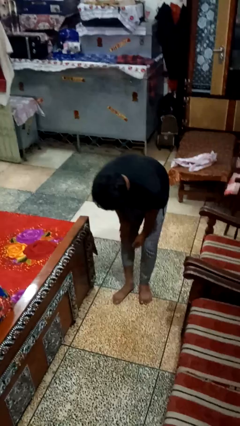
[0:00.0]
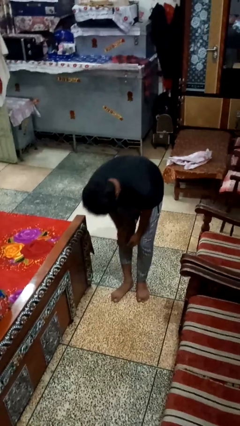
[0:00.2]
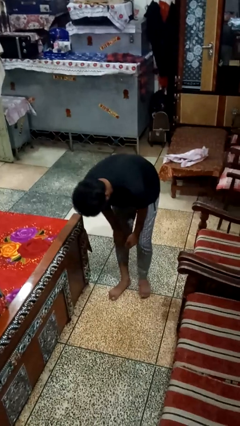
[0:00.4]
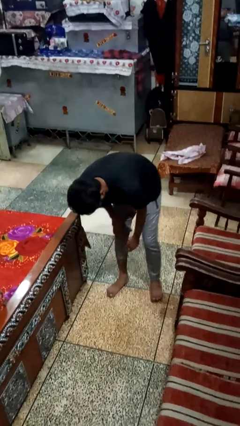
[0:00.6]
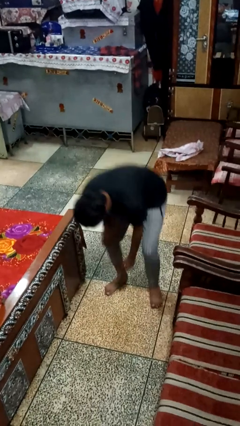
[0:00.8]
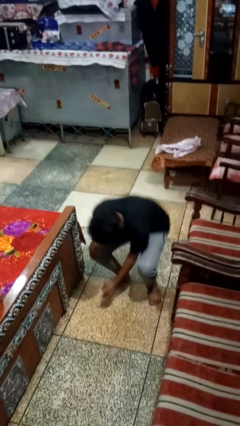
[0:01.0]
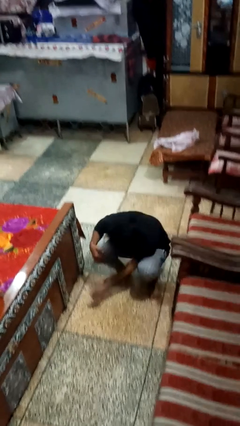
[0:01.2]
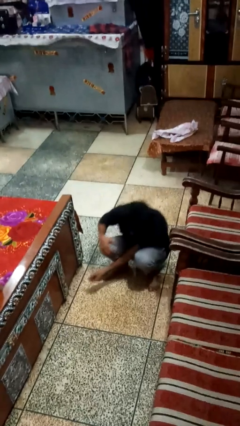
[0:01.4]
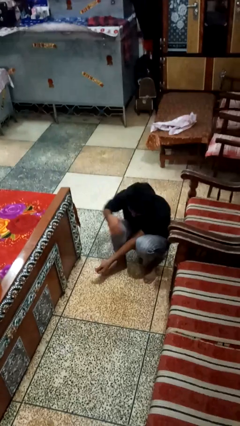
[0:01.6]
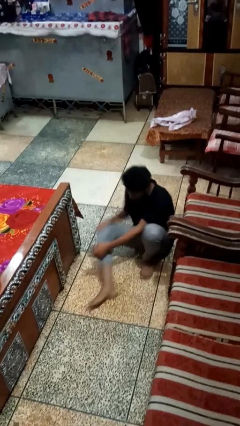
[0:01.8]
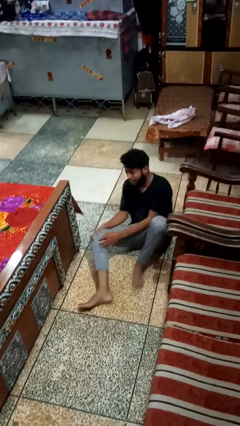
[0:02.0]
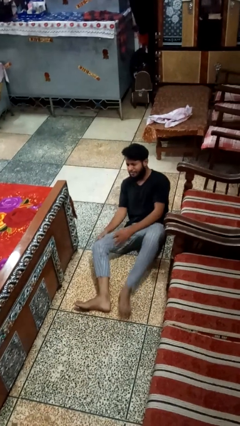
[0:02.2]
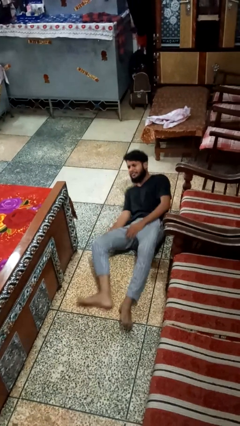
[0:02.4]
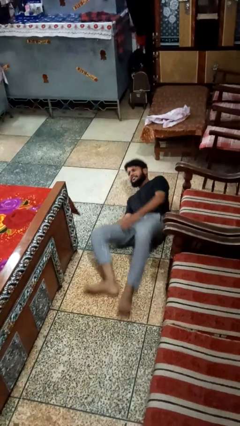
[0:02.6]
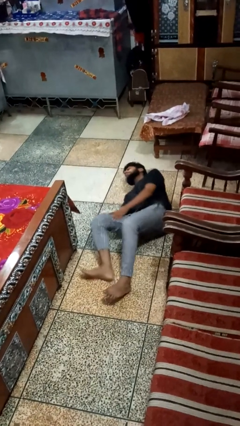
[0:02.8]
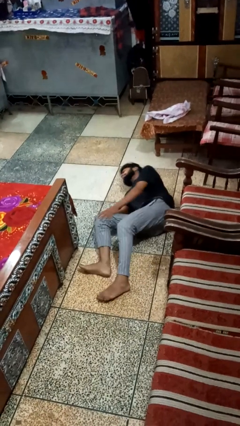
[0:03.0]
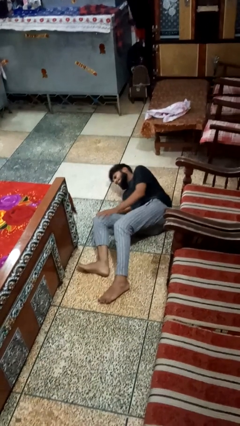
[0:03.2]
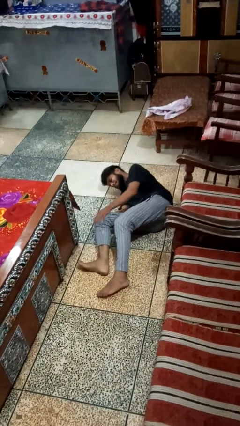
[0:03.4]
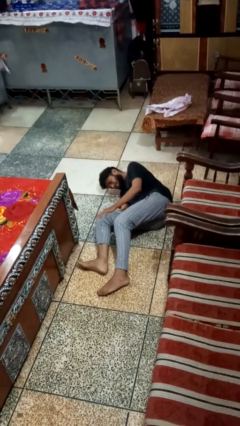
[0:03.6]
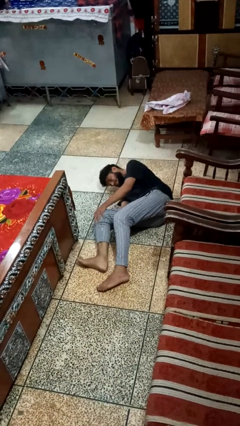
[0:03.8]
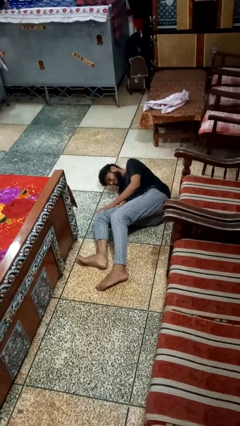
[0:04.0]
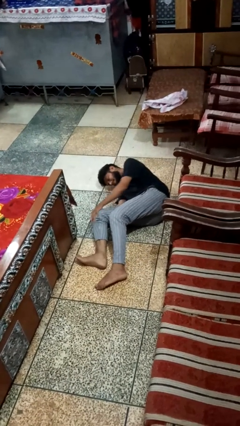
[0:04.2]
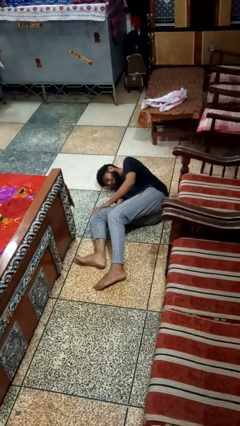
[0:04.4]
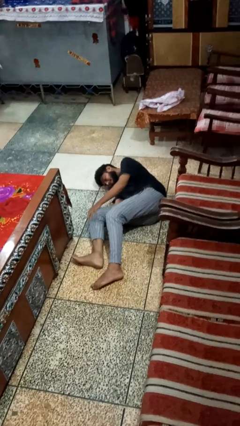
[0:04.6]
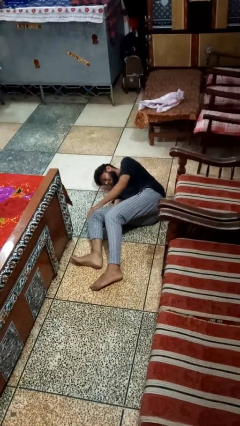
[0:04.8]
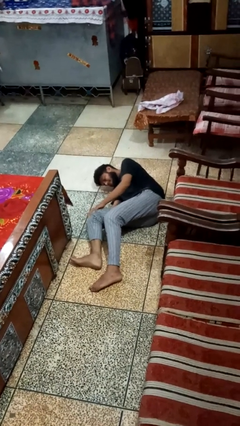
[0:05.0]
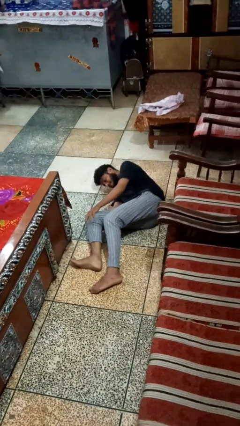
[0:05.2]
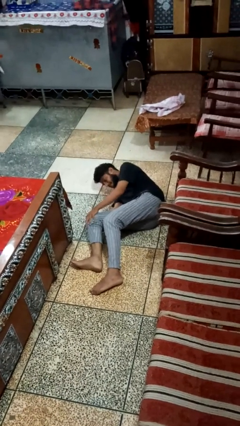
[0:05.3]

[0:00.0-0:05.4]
person lies down on floor

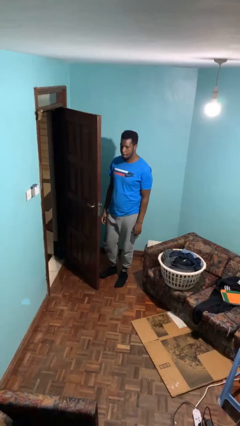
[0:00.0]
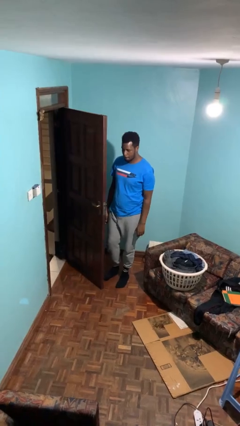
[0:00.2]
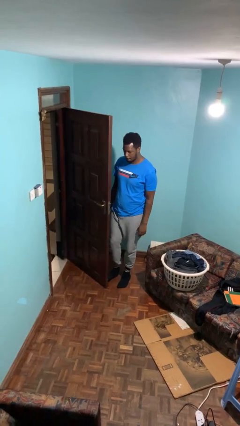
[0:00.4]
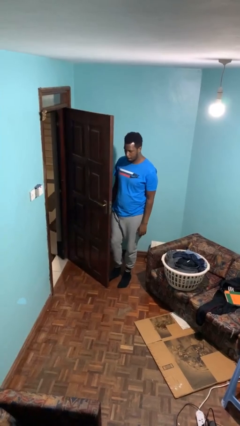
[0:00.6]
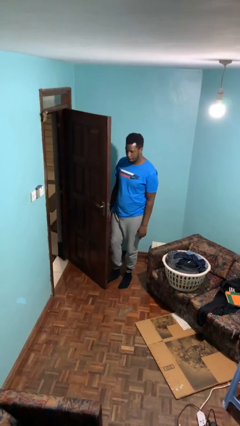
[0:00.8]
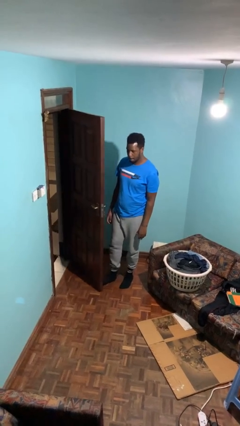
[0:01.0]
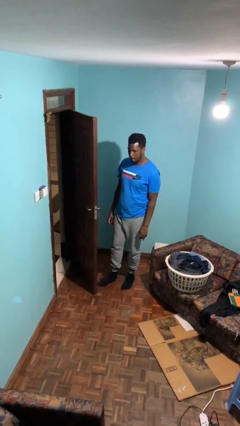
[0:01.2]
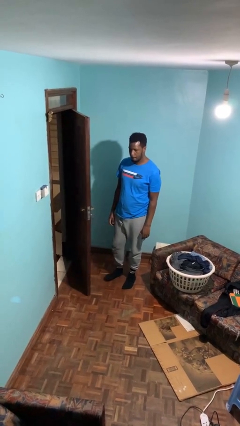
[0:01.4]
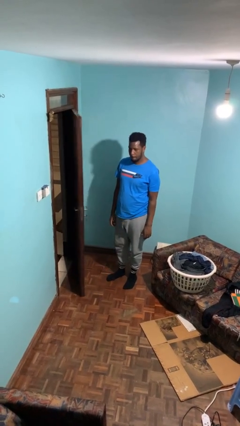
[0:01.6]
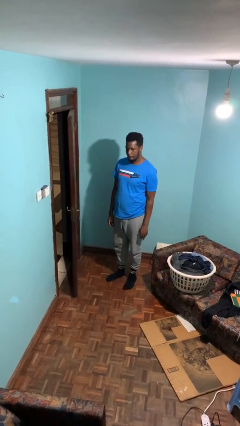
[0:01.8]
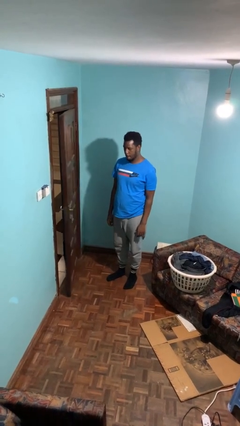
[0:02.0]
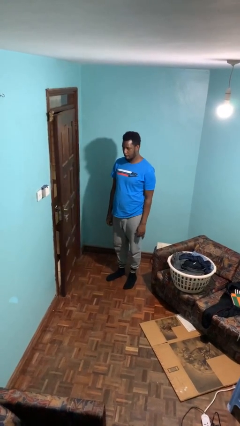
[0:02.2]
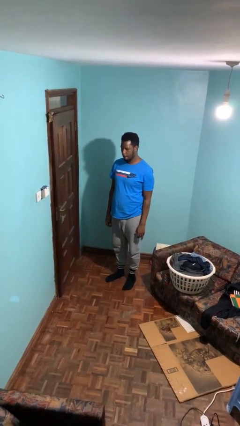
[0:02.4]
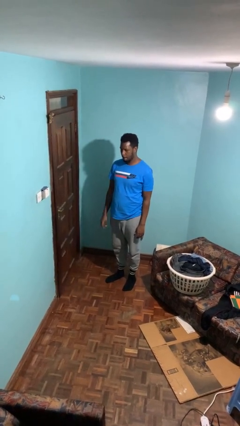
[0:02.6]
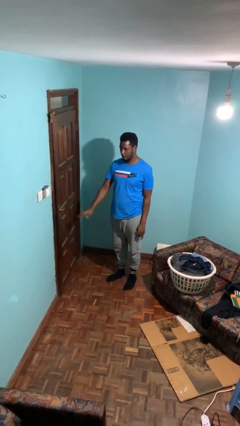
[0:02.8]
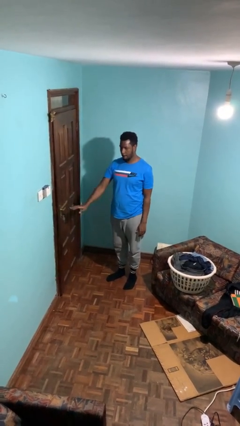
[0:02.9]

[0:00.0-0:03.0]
person closes door with foot

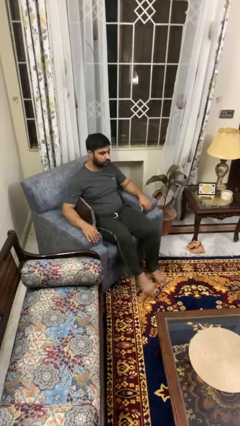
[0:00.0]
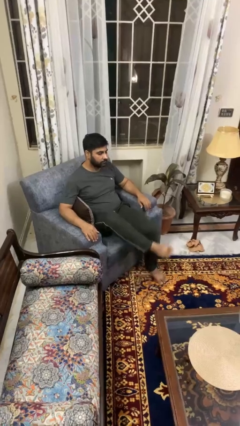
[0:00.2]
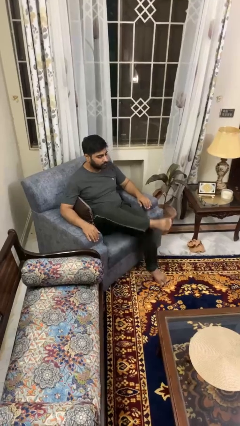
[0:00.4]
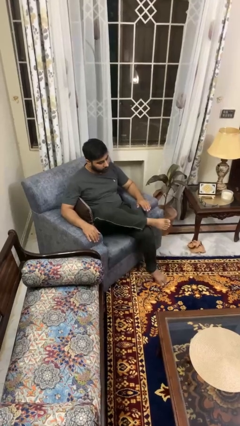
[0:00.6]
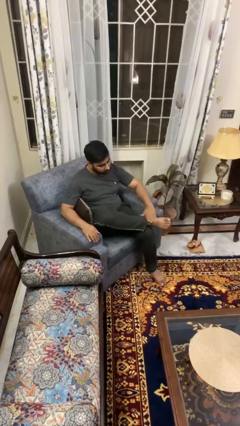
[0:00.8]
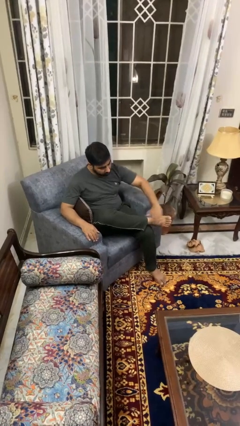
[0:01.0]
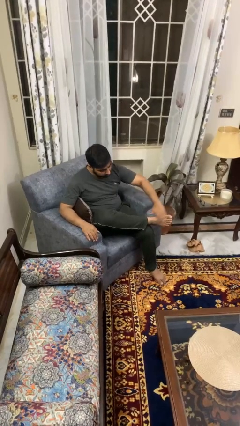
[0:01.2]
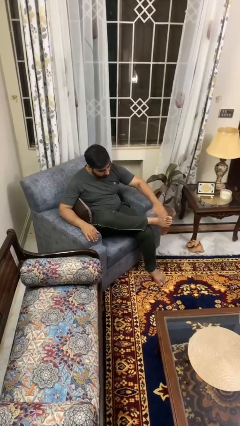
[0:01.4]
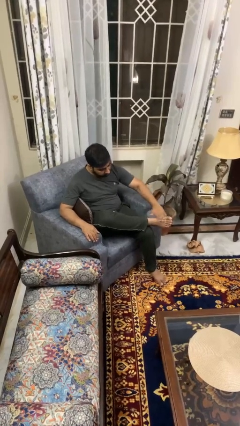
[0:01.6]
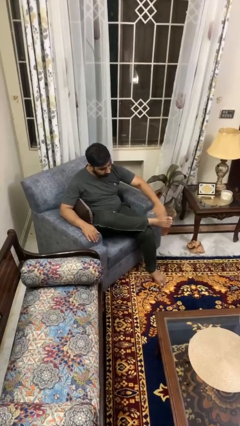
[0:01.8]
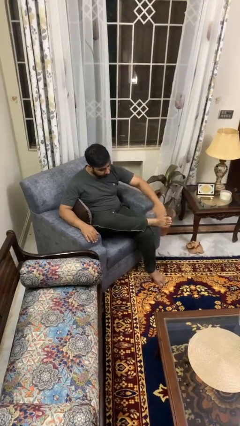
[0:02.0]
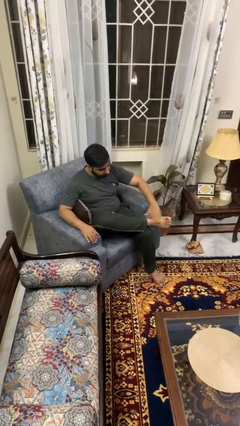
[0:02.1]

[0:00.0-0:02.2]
person rubs foot

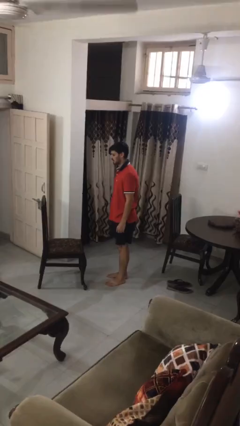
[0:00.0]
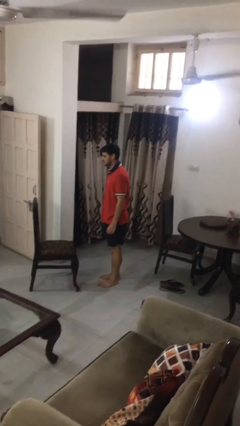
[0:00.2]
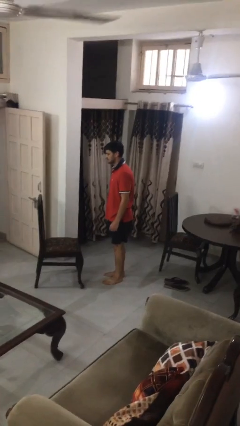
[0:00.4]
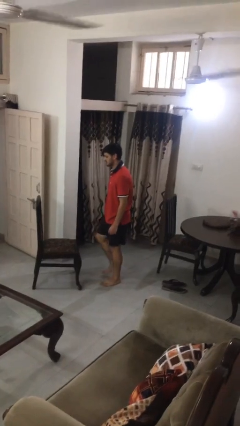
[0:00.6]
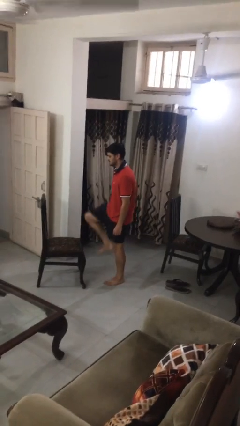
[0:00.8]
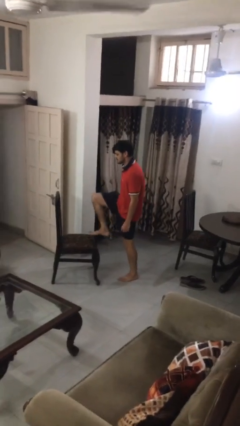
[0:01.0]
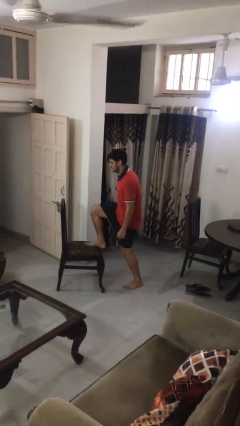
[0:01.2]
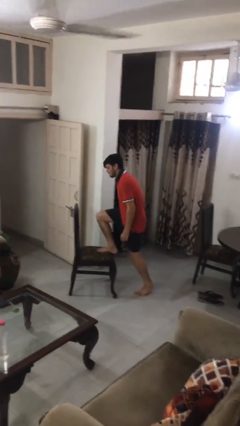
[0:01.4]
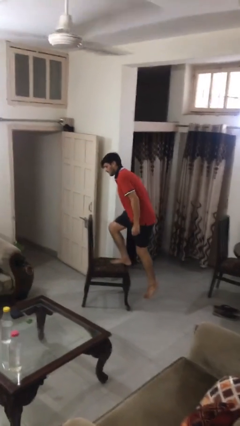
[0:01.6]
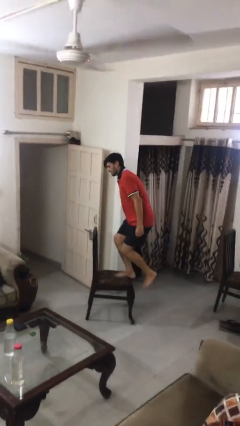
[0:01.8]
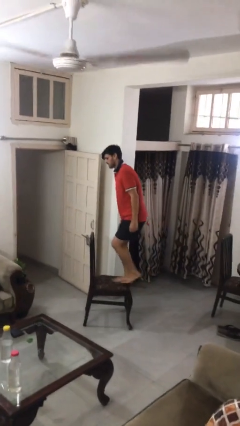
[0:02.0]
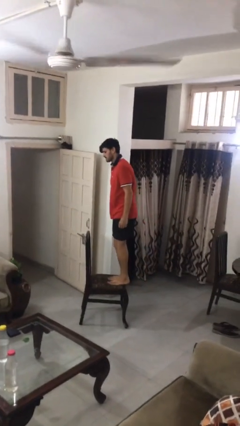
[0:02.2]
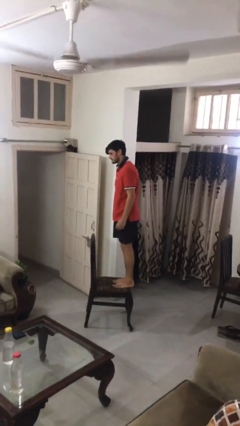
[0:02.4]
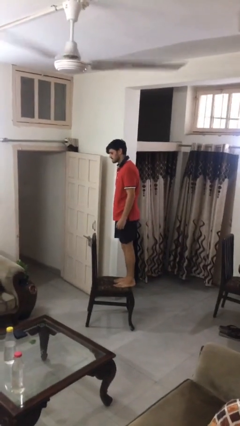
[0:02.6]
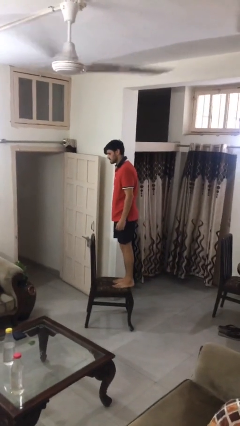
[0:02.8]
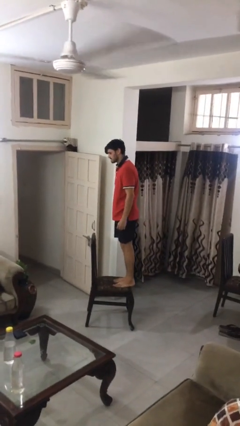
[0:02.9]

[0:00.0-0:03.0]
person climbs on chair

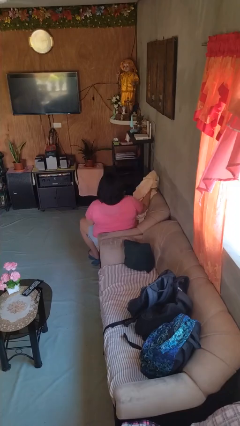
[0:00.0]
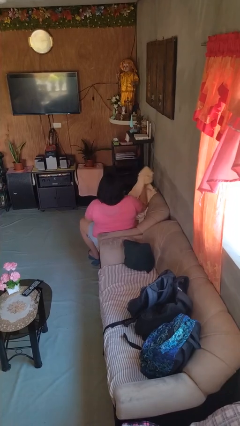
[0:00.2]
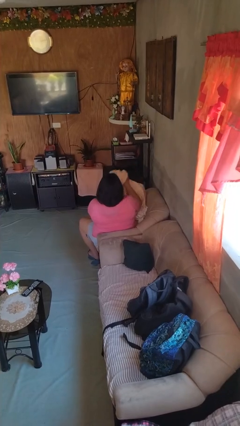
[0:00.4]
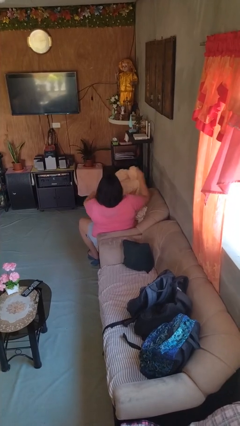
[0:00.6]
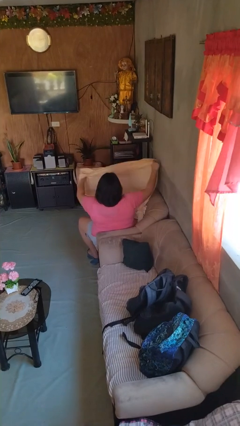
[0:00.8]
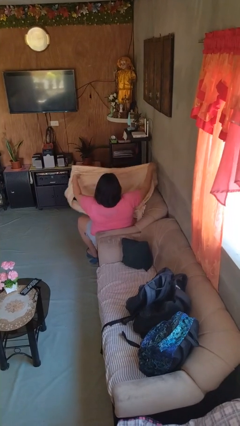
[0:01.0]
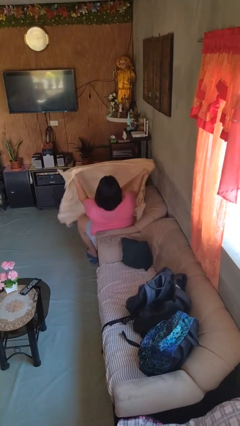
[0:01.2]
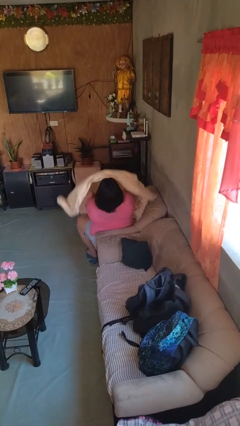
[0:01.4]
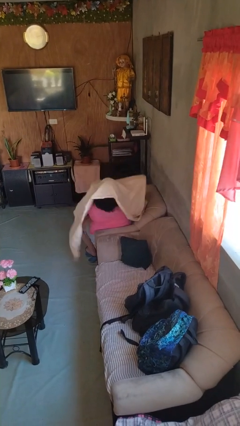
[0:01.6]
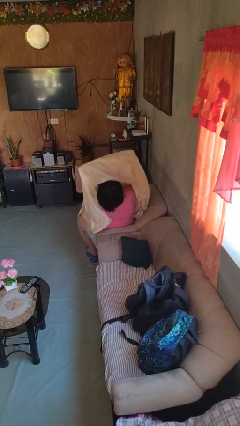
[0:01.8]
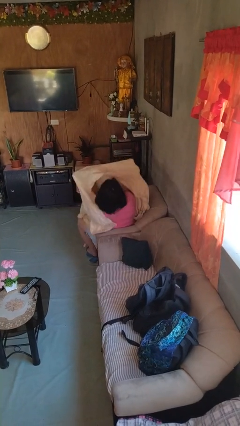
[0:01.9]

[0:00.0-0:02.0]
person covers with blanket

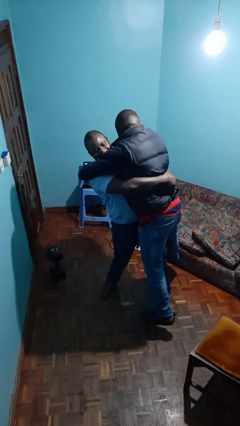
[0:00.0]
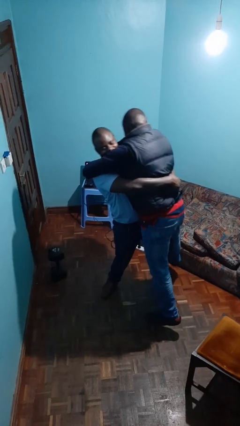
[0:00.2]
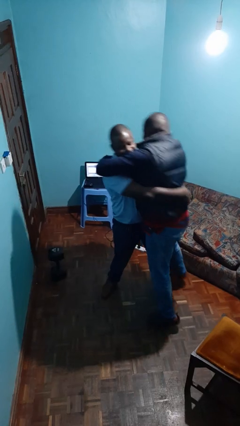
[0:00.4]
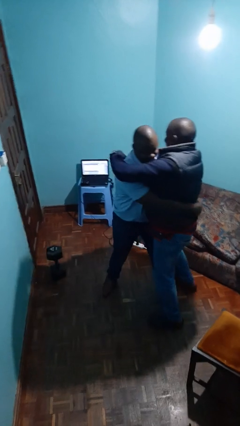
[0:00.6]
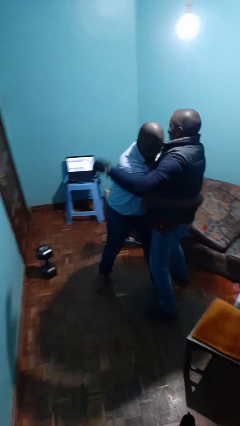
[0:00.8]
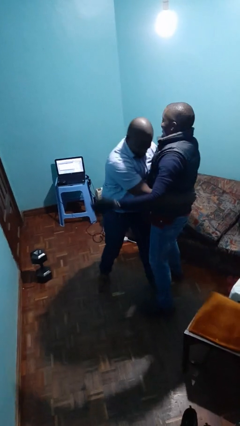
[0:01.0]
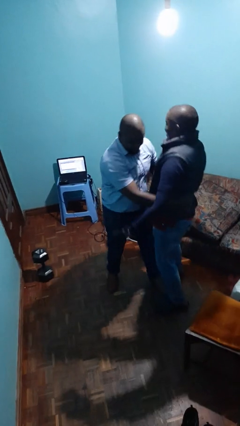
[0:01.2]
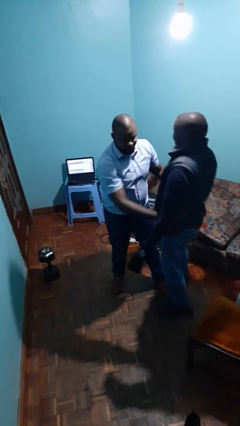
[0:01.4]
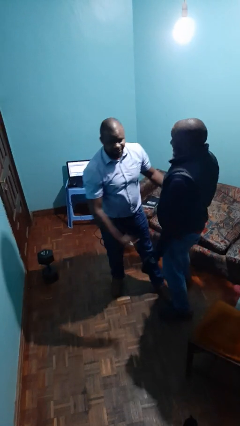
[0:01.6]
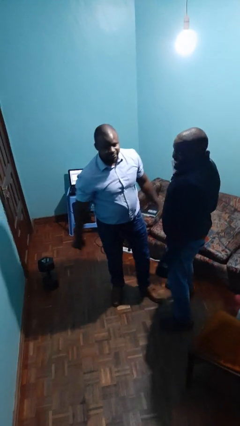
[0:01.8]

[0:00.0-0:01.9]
person puts down person

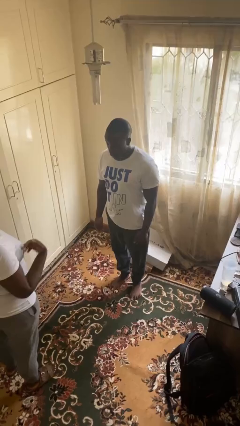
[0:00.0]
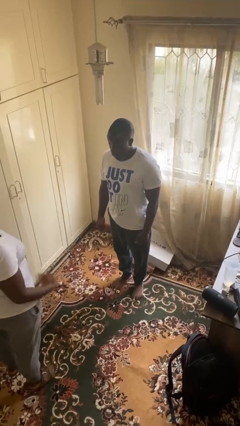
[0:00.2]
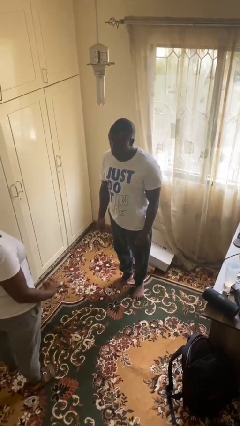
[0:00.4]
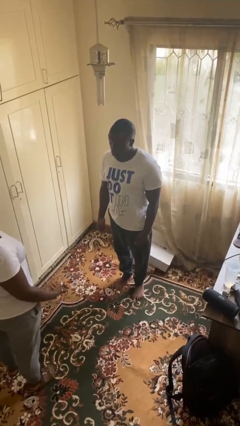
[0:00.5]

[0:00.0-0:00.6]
person bumps into person
